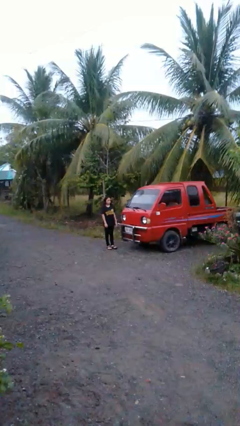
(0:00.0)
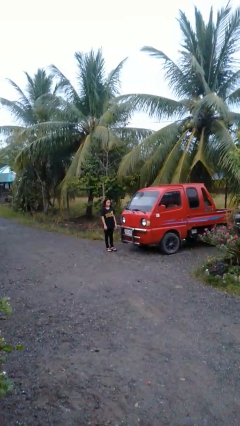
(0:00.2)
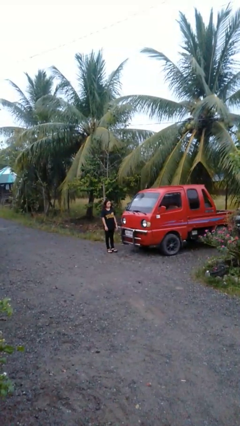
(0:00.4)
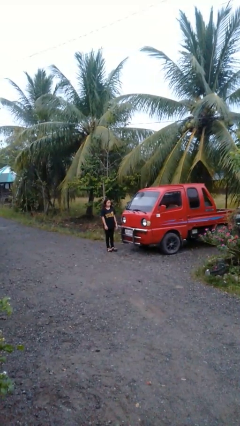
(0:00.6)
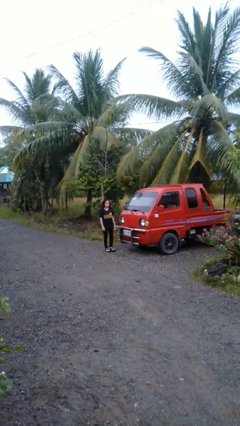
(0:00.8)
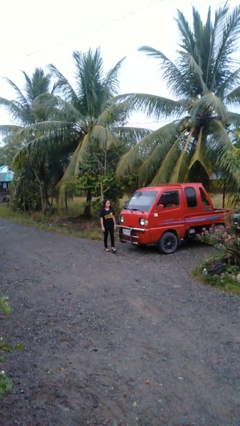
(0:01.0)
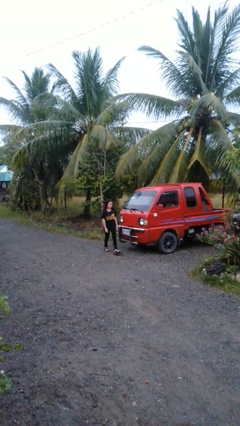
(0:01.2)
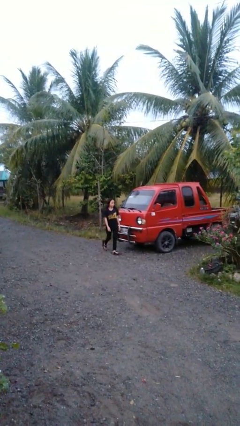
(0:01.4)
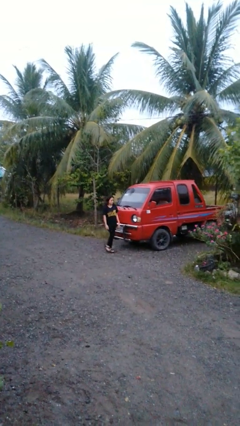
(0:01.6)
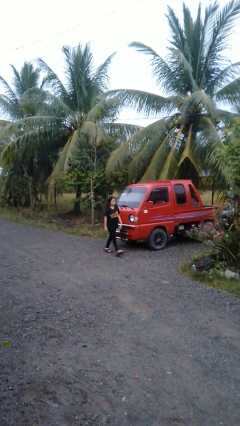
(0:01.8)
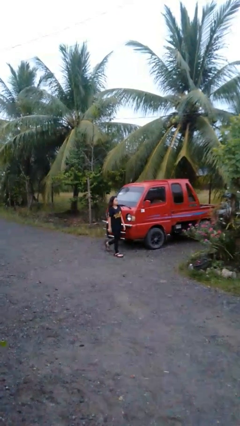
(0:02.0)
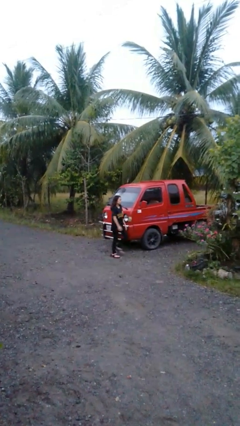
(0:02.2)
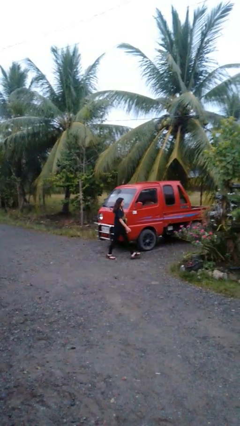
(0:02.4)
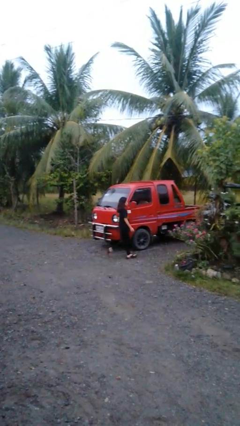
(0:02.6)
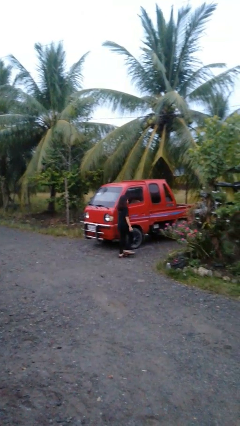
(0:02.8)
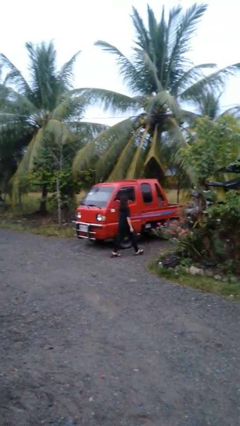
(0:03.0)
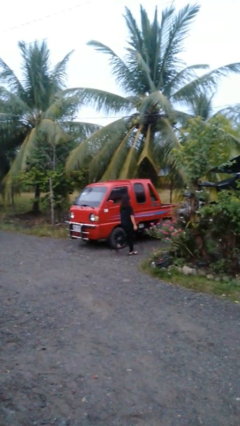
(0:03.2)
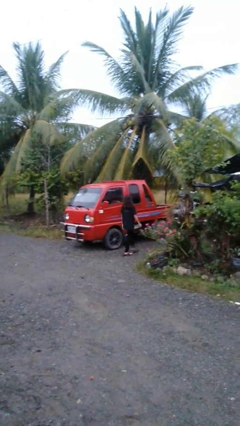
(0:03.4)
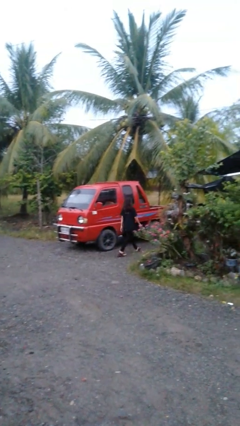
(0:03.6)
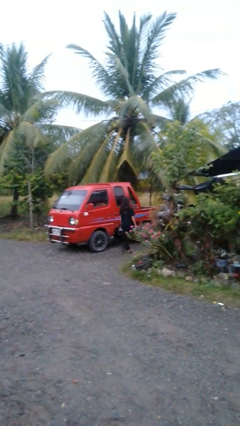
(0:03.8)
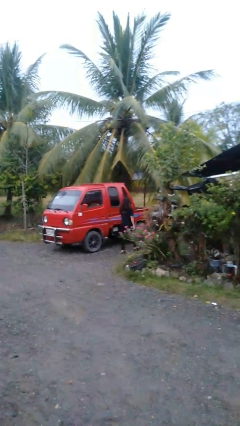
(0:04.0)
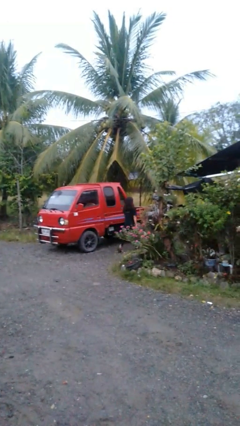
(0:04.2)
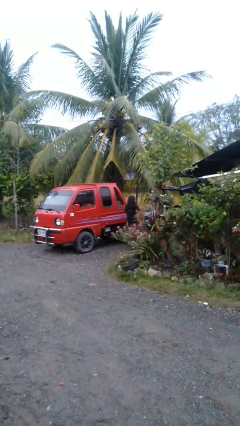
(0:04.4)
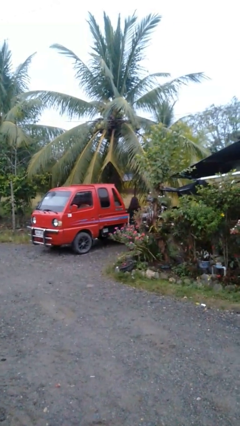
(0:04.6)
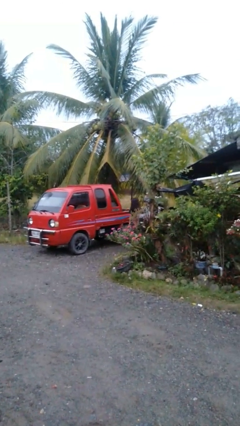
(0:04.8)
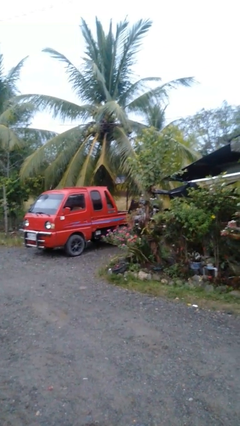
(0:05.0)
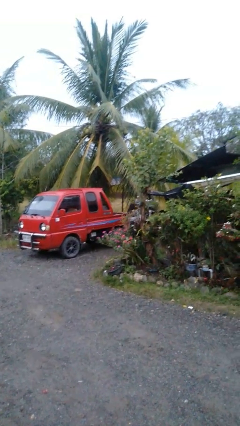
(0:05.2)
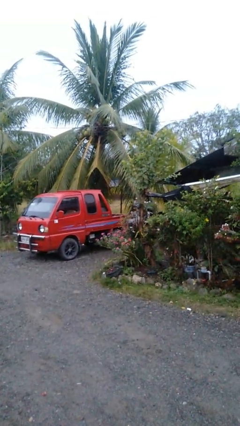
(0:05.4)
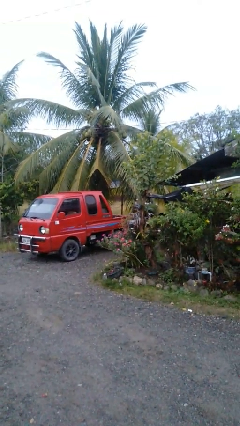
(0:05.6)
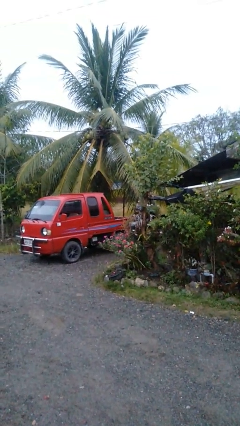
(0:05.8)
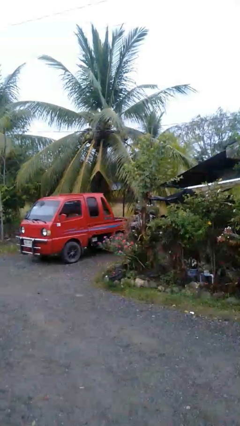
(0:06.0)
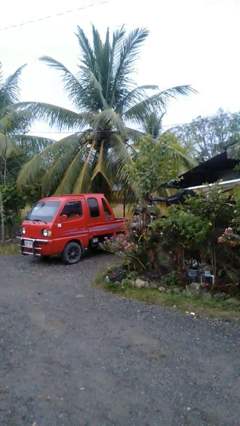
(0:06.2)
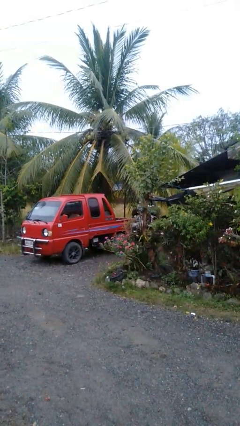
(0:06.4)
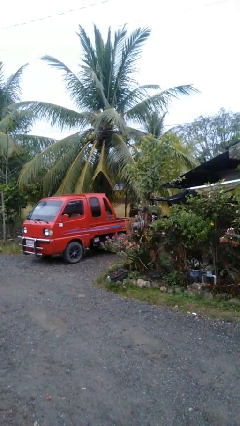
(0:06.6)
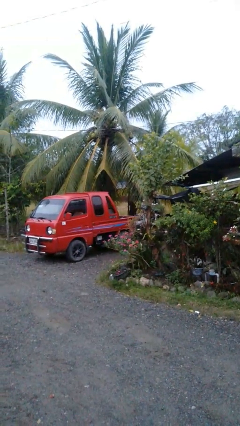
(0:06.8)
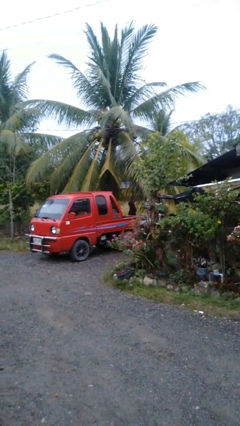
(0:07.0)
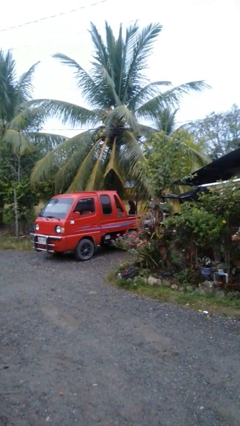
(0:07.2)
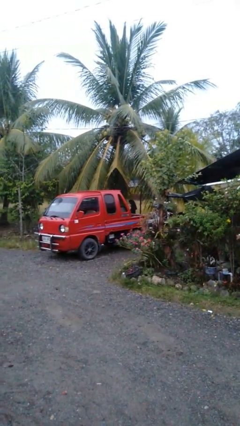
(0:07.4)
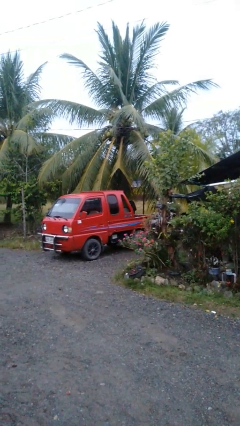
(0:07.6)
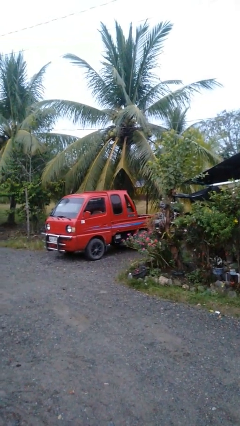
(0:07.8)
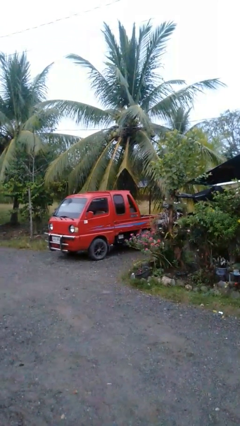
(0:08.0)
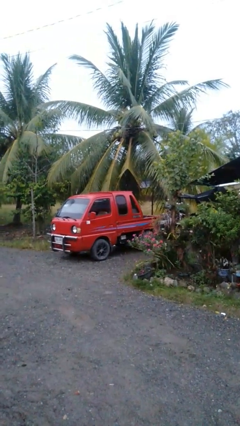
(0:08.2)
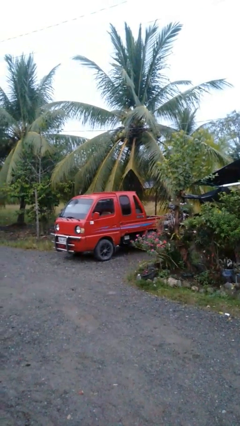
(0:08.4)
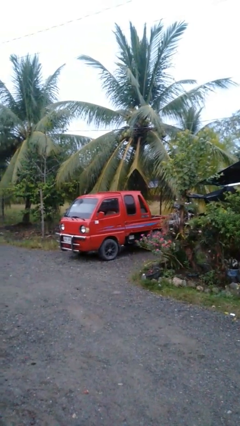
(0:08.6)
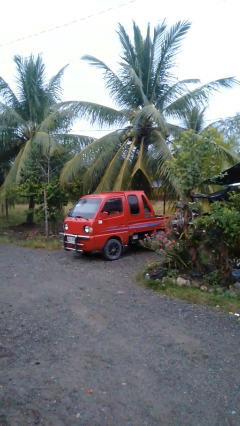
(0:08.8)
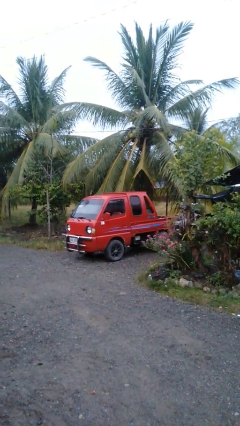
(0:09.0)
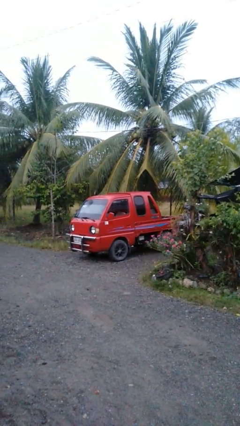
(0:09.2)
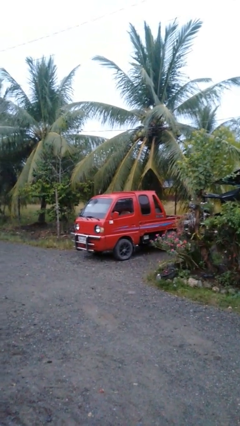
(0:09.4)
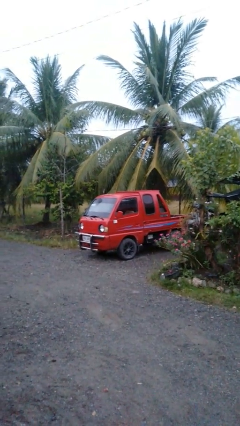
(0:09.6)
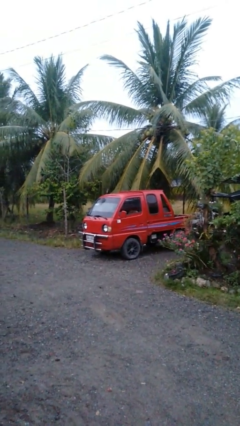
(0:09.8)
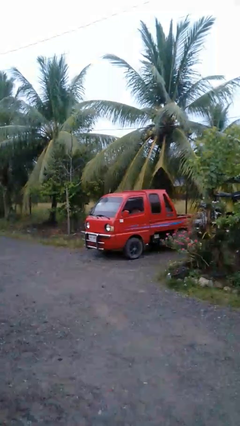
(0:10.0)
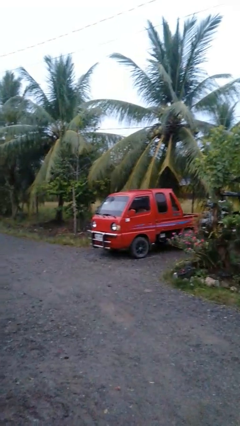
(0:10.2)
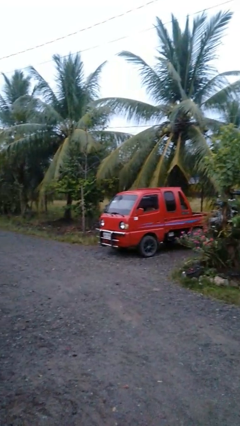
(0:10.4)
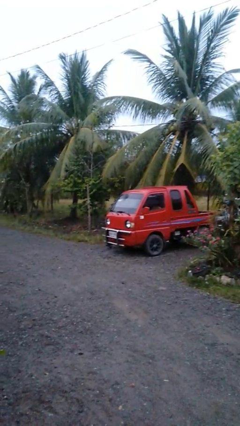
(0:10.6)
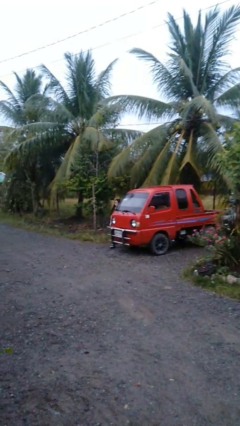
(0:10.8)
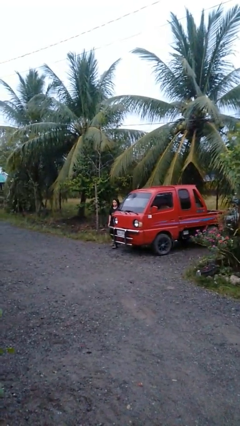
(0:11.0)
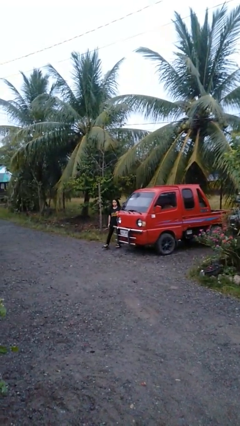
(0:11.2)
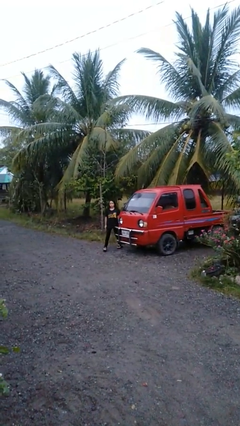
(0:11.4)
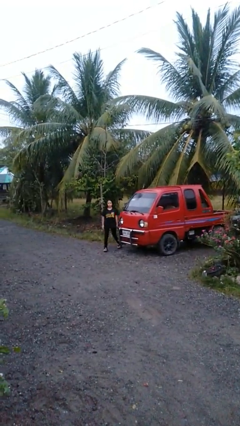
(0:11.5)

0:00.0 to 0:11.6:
person walks around car

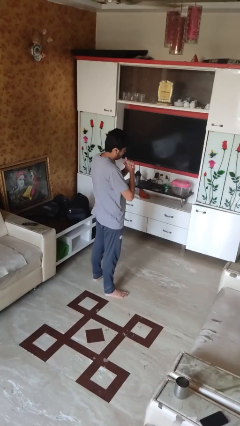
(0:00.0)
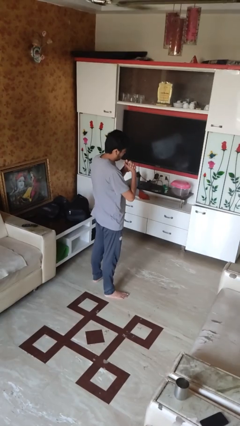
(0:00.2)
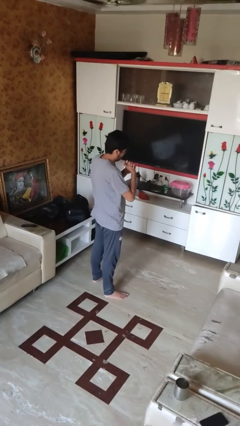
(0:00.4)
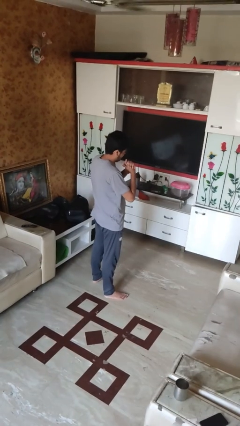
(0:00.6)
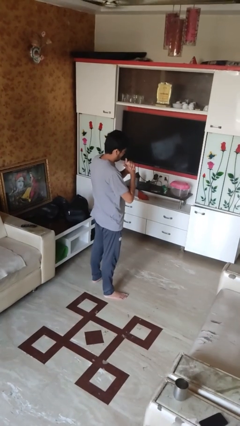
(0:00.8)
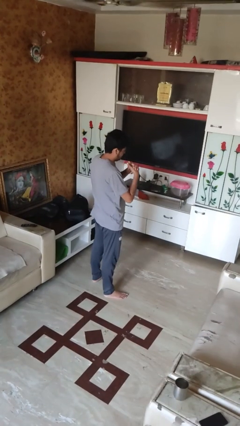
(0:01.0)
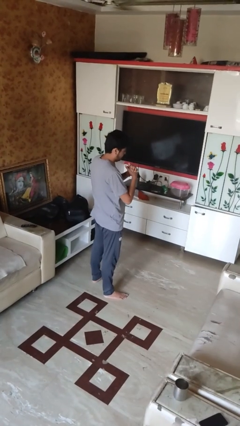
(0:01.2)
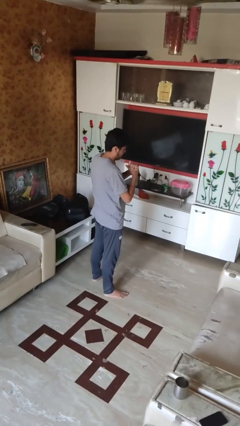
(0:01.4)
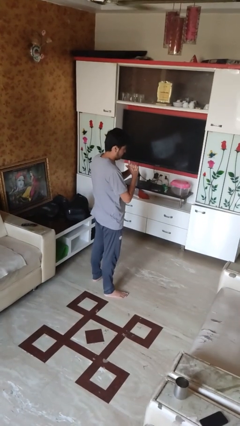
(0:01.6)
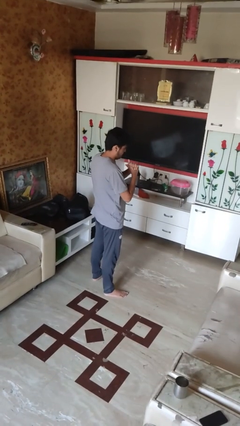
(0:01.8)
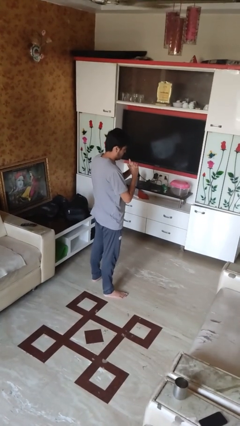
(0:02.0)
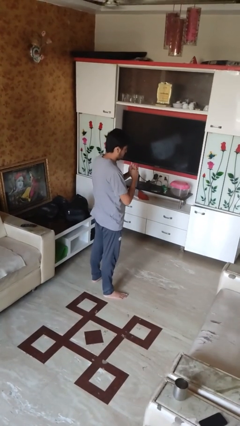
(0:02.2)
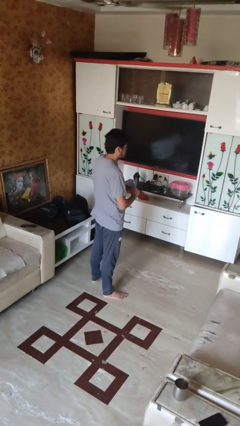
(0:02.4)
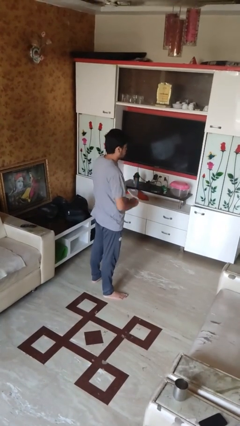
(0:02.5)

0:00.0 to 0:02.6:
person cracks knuckles

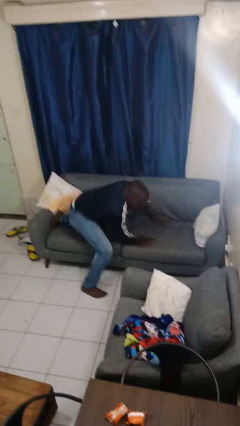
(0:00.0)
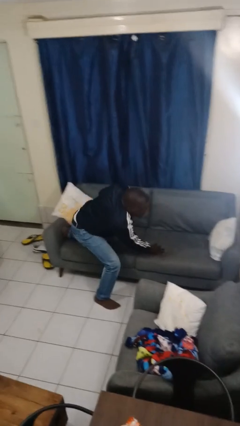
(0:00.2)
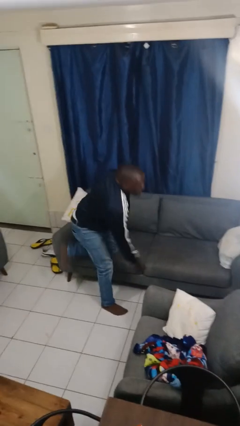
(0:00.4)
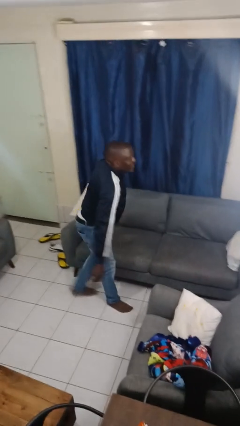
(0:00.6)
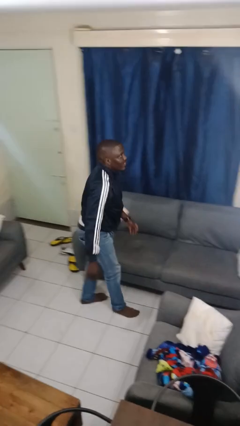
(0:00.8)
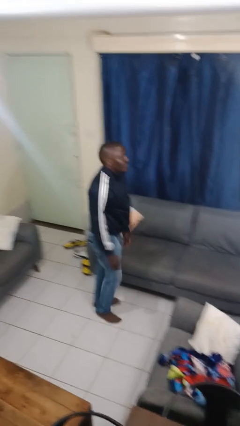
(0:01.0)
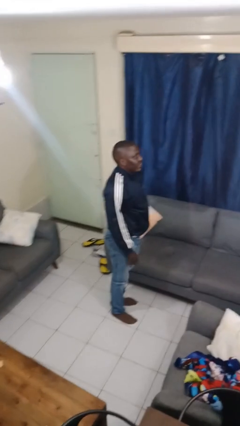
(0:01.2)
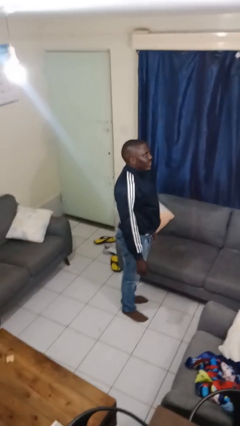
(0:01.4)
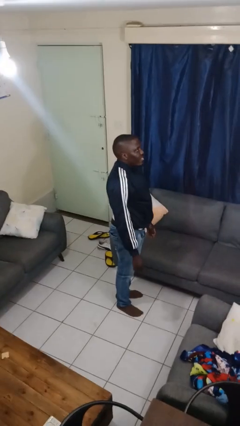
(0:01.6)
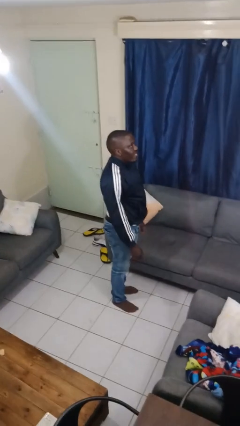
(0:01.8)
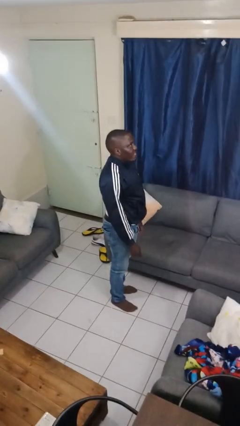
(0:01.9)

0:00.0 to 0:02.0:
person stands up

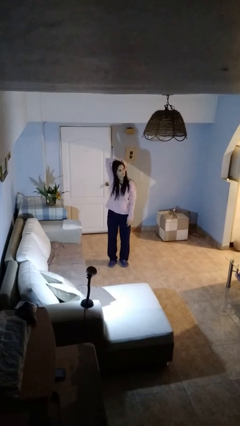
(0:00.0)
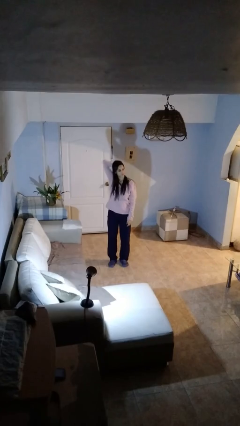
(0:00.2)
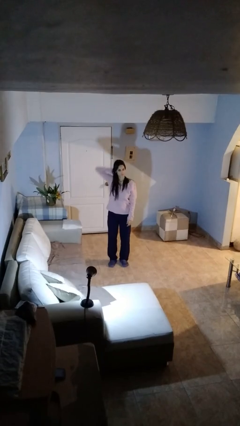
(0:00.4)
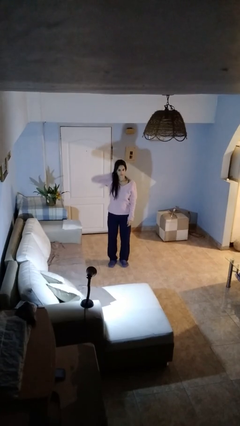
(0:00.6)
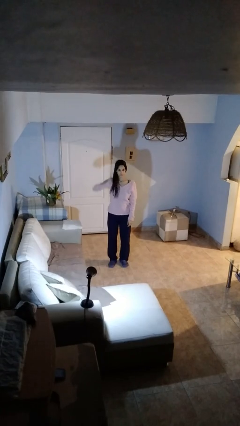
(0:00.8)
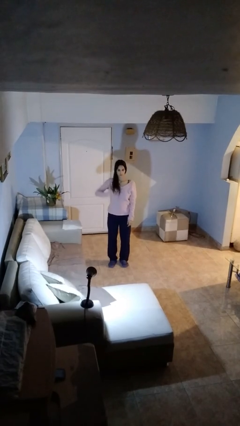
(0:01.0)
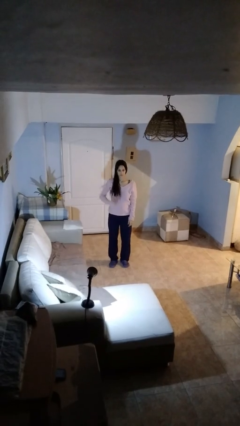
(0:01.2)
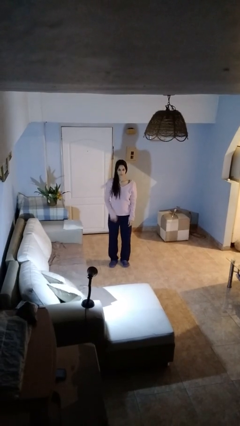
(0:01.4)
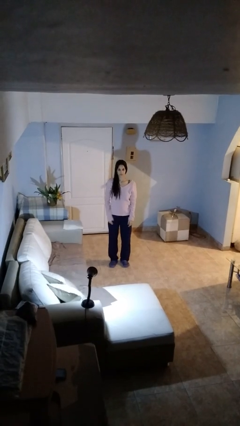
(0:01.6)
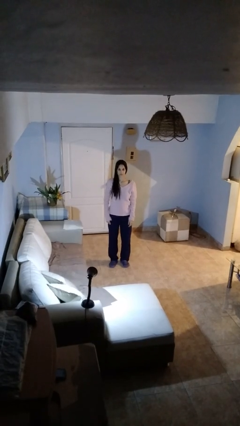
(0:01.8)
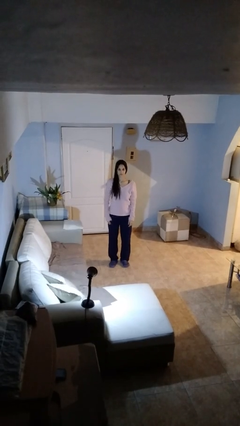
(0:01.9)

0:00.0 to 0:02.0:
person strokes hair
